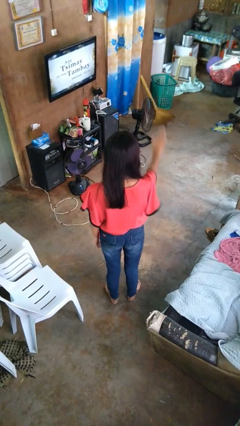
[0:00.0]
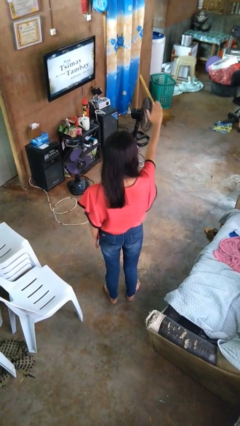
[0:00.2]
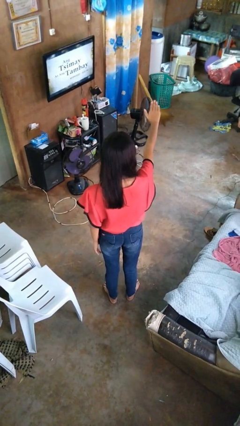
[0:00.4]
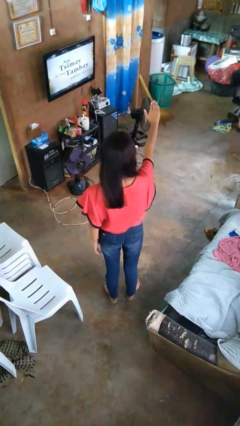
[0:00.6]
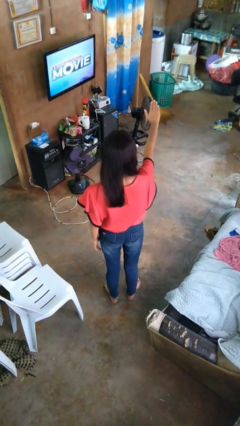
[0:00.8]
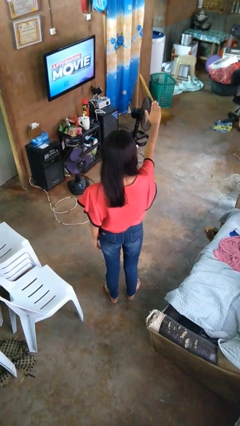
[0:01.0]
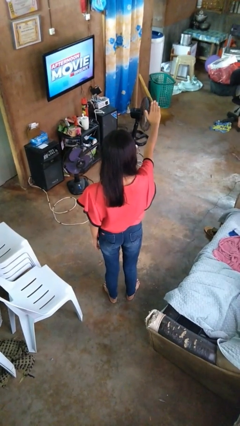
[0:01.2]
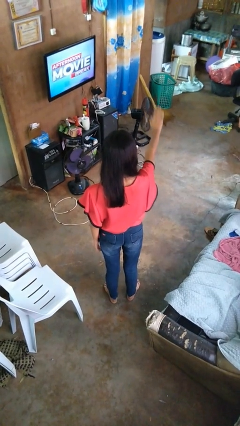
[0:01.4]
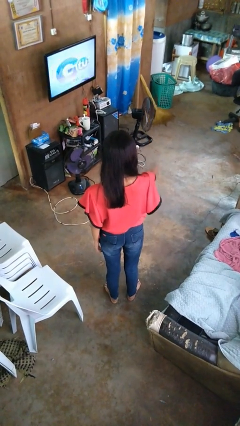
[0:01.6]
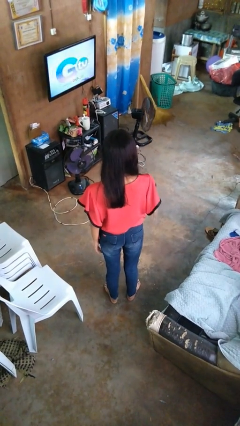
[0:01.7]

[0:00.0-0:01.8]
person gestures stop

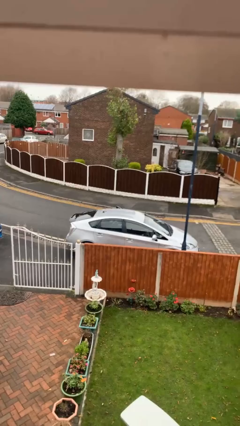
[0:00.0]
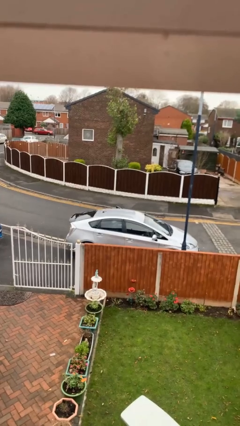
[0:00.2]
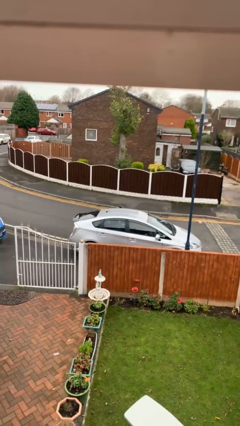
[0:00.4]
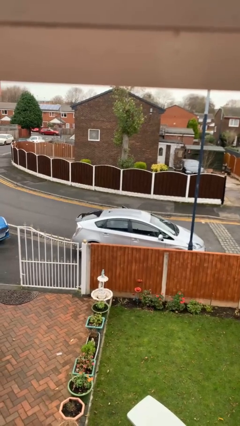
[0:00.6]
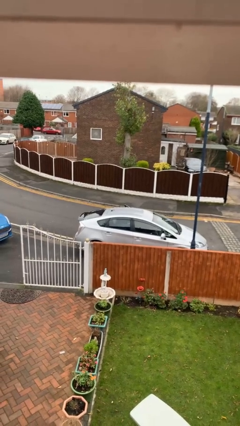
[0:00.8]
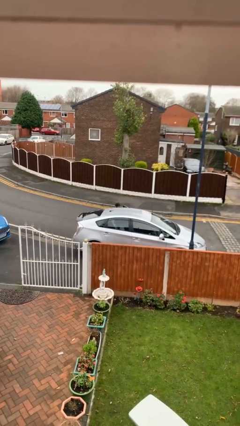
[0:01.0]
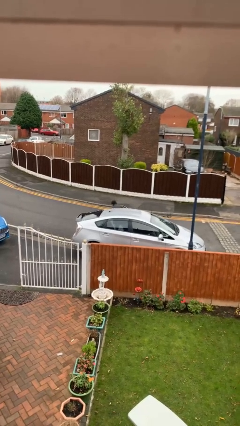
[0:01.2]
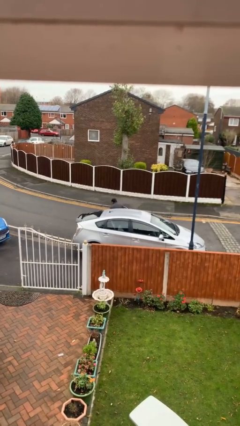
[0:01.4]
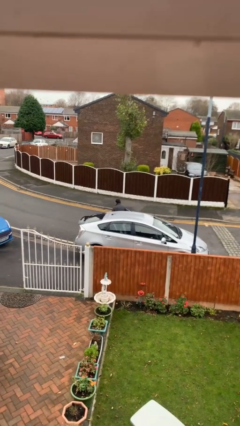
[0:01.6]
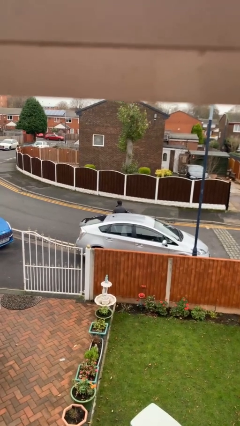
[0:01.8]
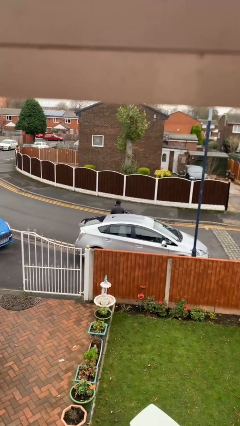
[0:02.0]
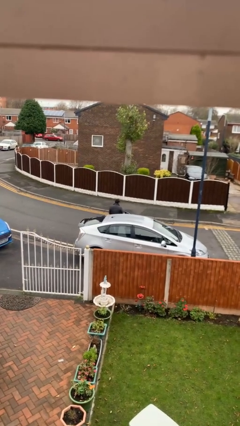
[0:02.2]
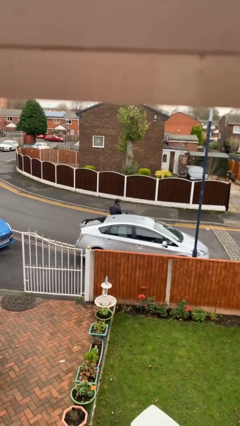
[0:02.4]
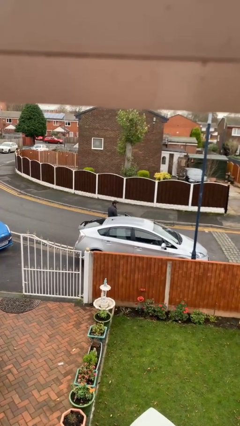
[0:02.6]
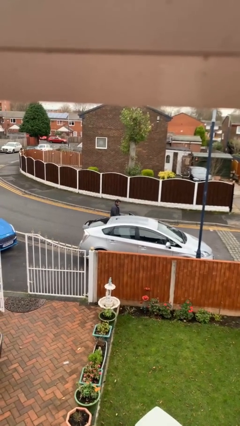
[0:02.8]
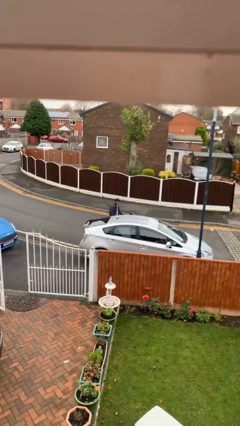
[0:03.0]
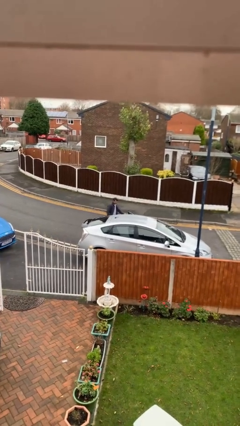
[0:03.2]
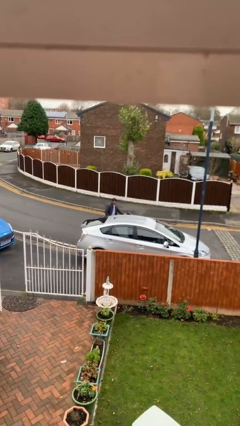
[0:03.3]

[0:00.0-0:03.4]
person exits car

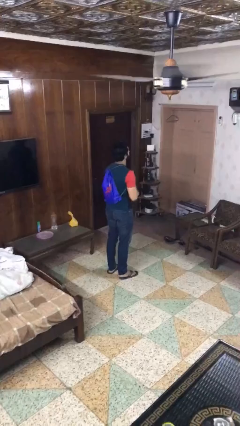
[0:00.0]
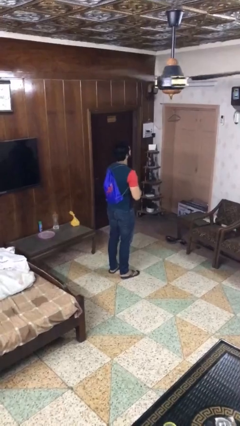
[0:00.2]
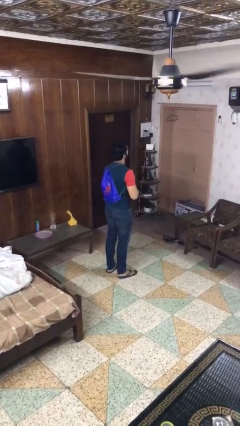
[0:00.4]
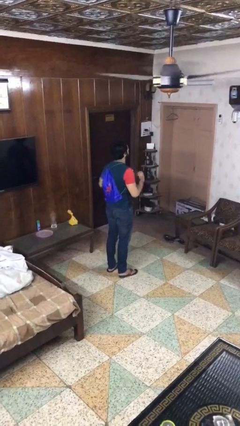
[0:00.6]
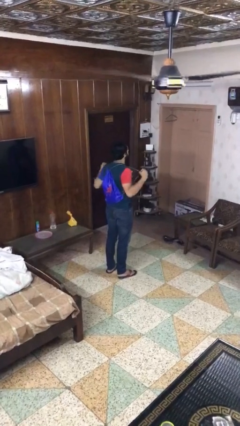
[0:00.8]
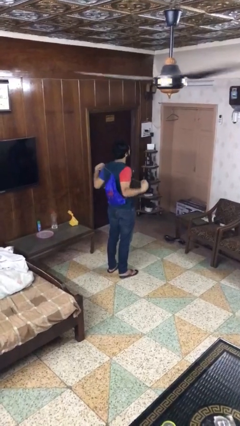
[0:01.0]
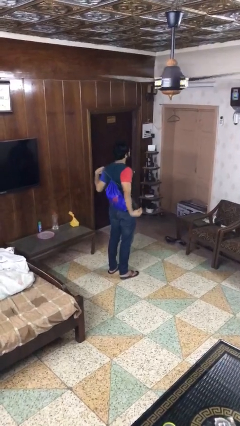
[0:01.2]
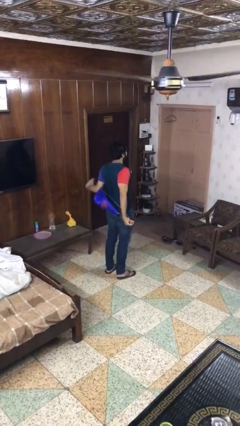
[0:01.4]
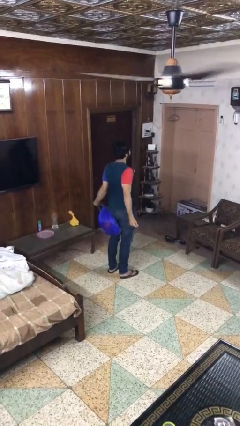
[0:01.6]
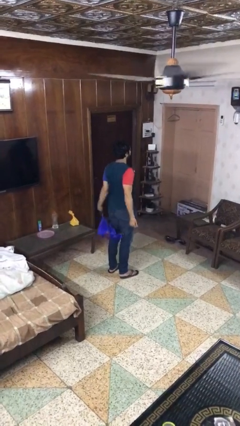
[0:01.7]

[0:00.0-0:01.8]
person takes off backpack

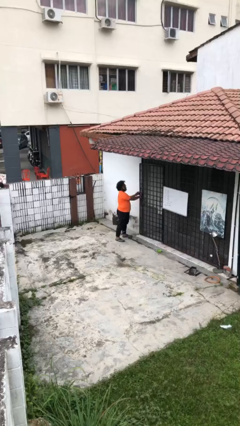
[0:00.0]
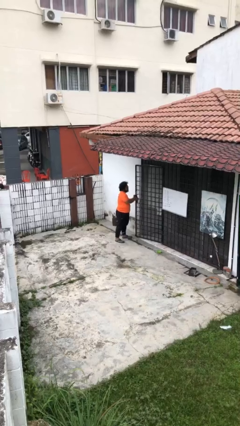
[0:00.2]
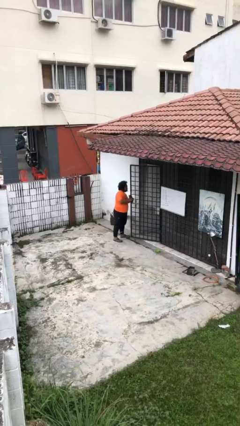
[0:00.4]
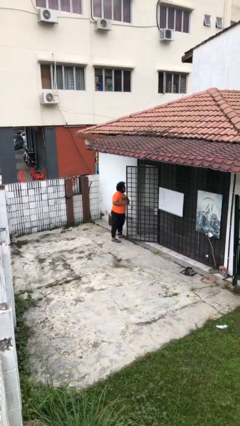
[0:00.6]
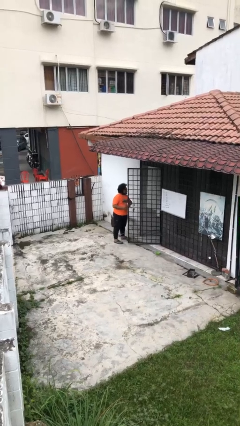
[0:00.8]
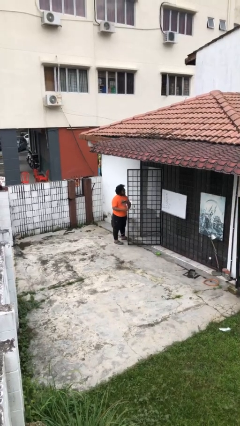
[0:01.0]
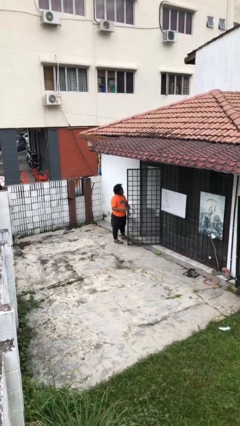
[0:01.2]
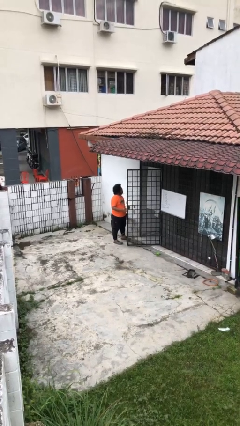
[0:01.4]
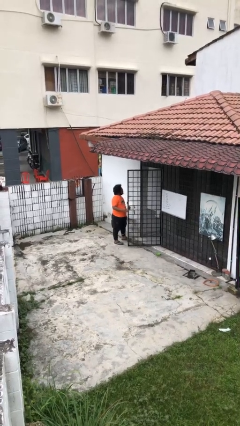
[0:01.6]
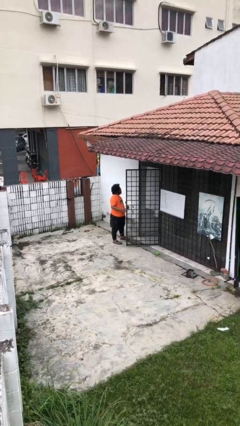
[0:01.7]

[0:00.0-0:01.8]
person opens facility door

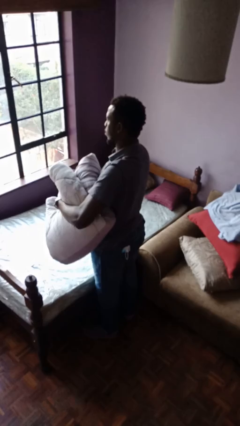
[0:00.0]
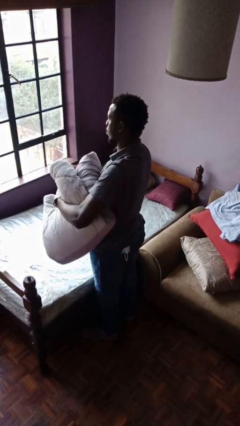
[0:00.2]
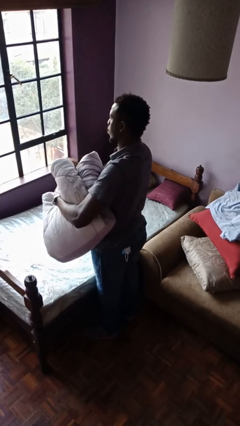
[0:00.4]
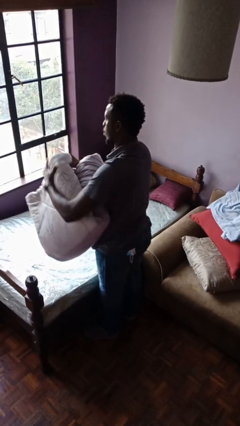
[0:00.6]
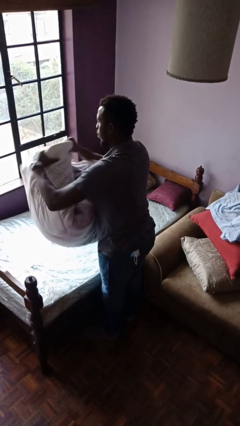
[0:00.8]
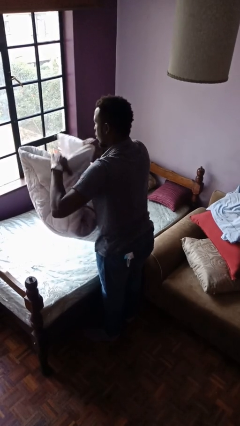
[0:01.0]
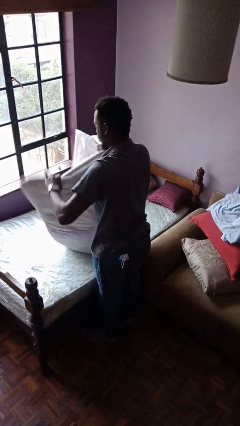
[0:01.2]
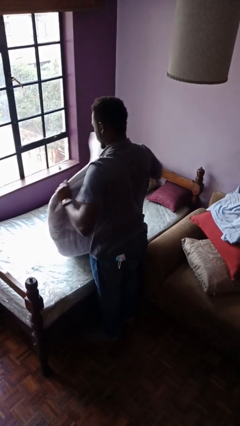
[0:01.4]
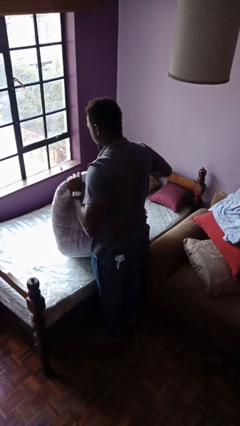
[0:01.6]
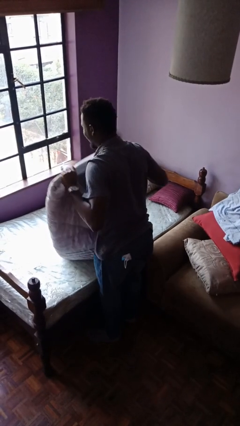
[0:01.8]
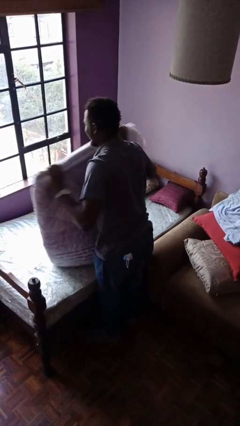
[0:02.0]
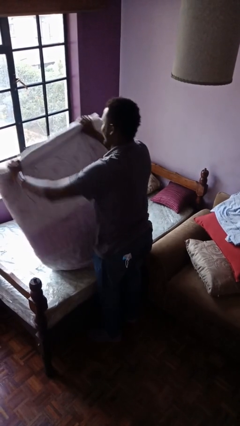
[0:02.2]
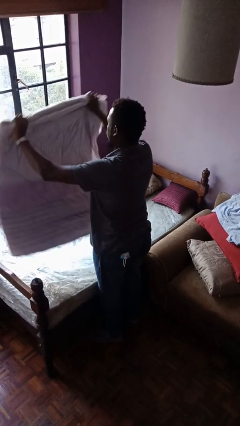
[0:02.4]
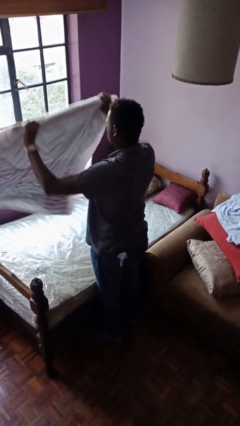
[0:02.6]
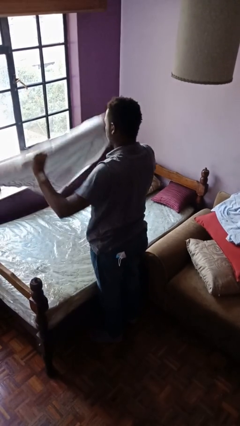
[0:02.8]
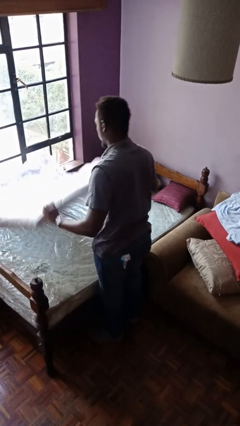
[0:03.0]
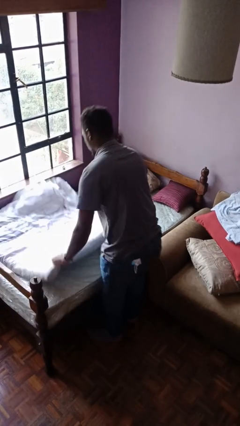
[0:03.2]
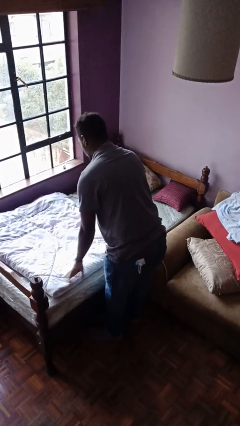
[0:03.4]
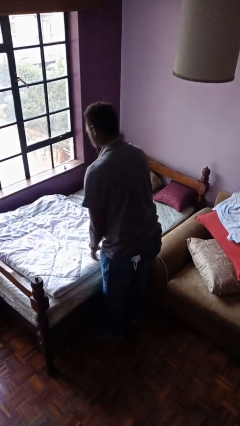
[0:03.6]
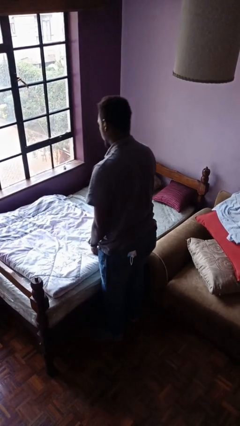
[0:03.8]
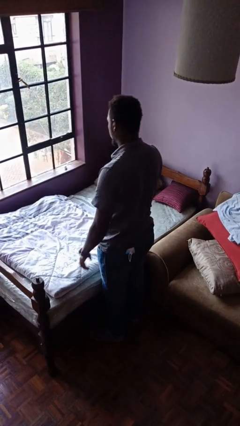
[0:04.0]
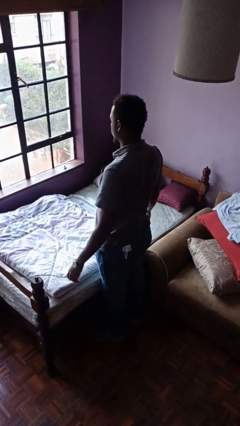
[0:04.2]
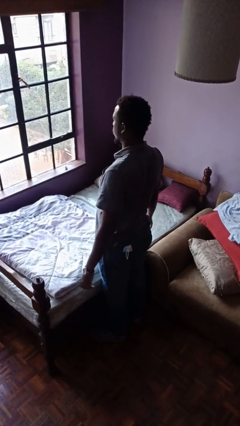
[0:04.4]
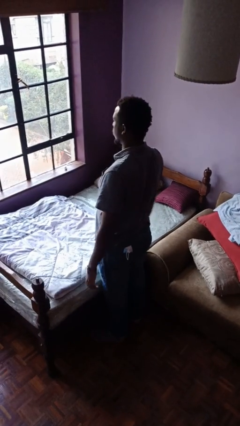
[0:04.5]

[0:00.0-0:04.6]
person unfolds blanket

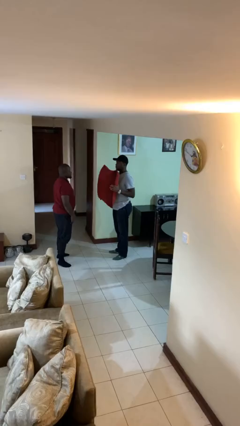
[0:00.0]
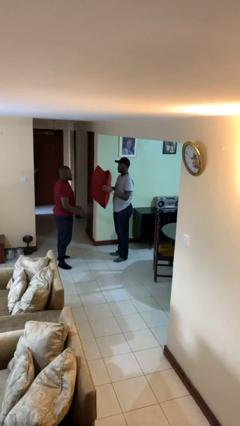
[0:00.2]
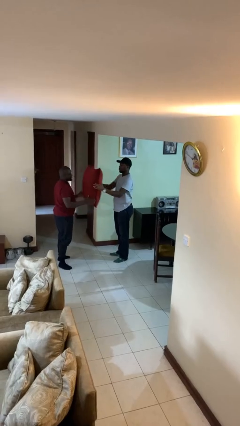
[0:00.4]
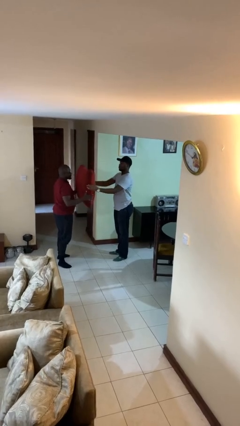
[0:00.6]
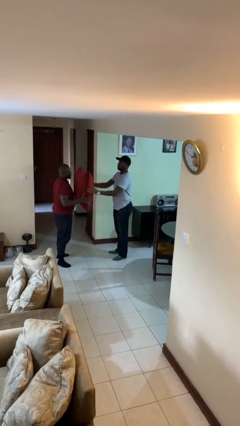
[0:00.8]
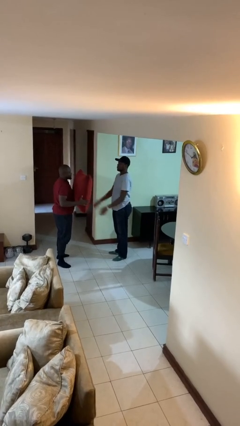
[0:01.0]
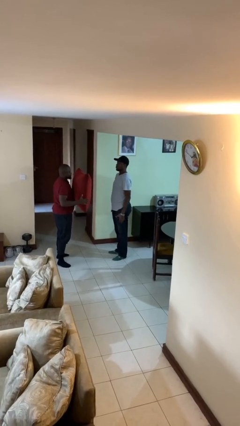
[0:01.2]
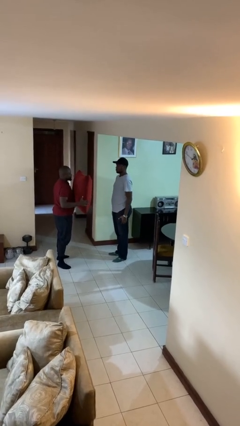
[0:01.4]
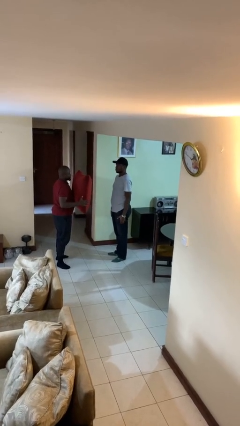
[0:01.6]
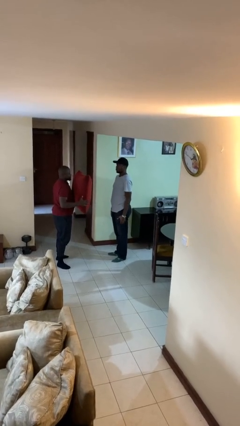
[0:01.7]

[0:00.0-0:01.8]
person transfers object to person

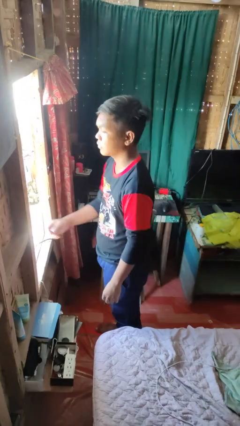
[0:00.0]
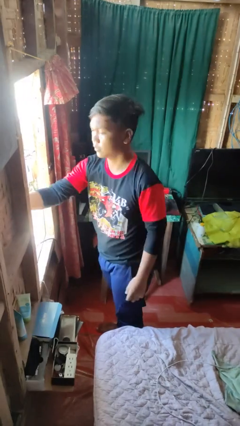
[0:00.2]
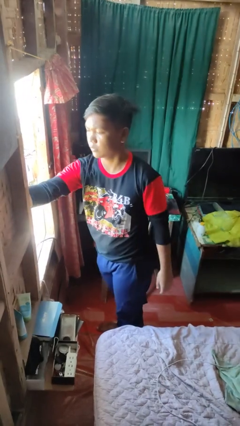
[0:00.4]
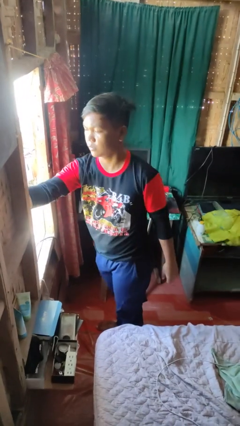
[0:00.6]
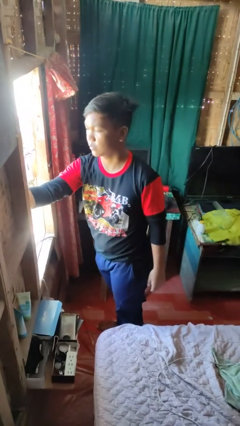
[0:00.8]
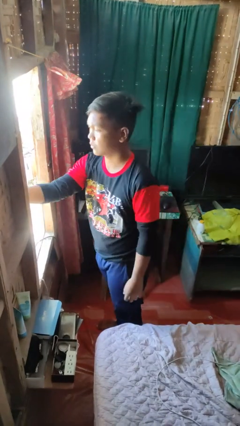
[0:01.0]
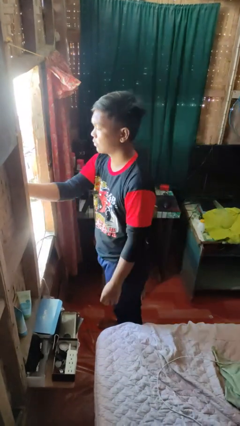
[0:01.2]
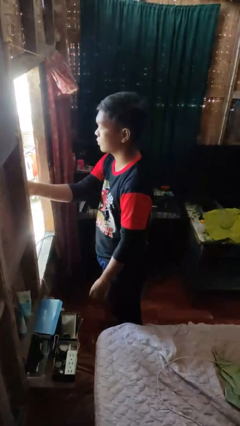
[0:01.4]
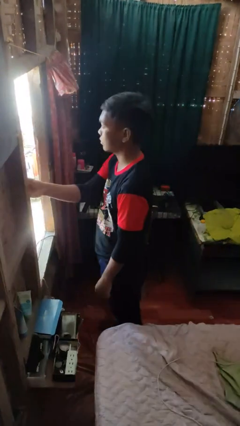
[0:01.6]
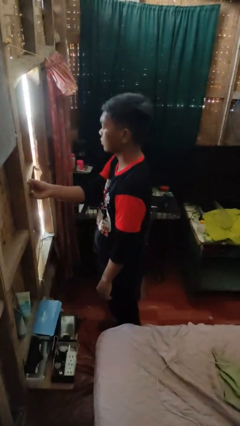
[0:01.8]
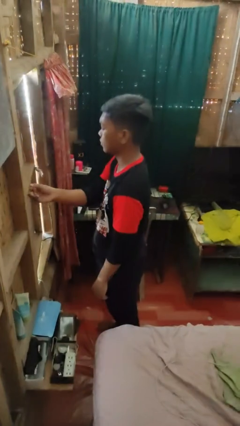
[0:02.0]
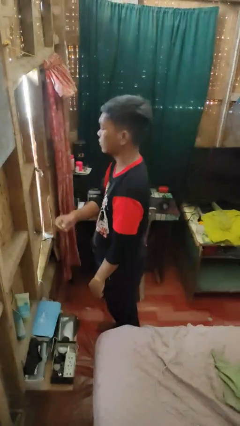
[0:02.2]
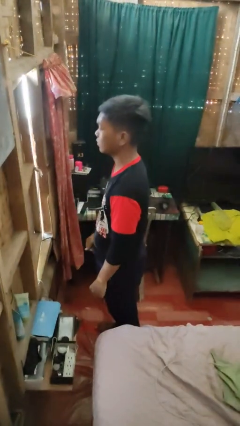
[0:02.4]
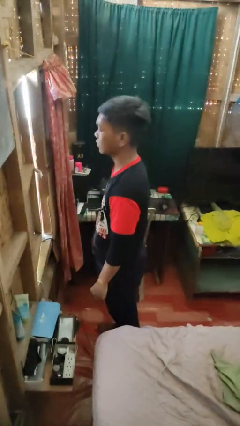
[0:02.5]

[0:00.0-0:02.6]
person closes home window
